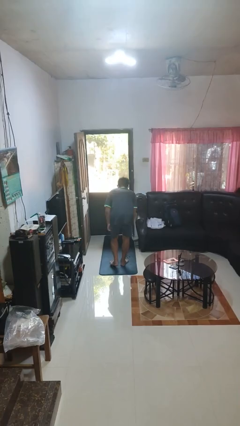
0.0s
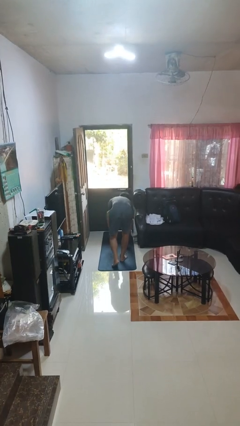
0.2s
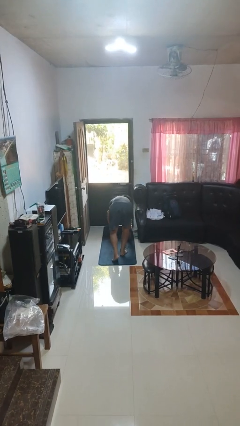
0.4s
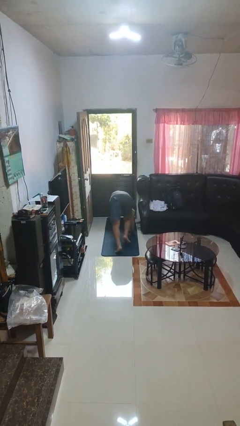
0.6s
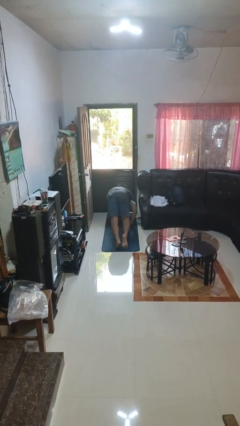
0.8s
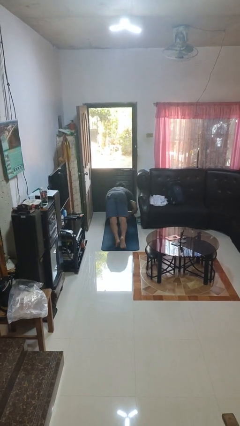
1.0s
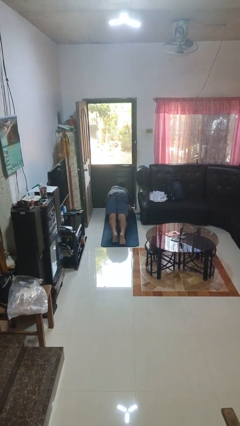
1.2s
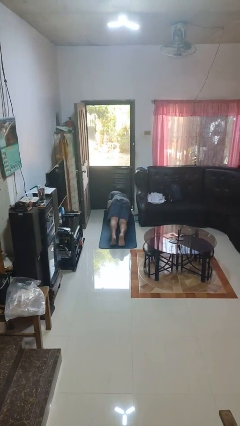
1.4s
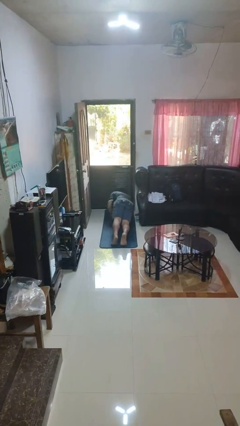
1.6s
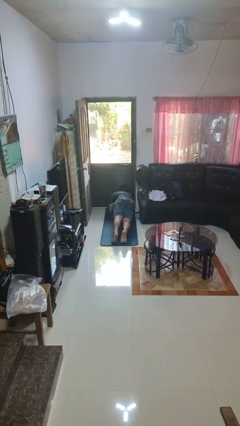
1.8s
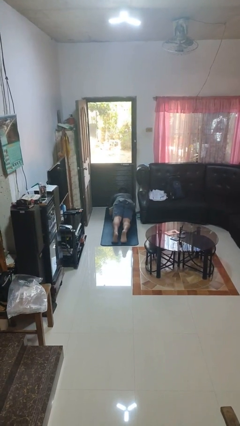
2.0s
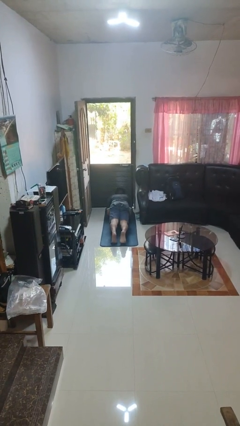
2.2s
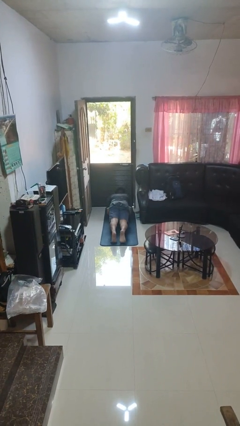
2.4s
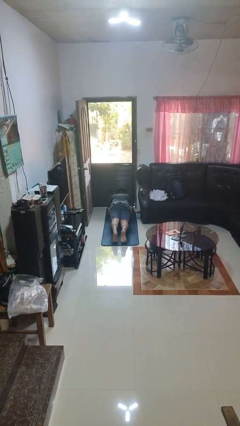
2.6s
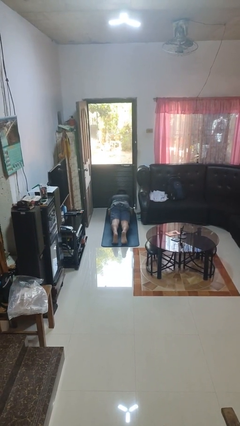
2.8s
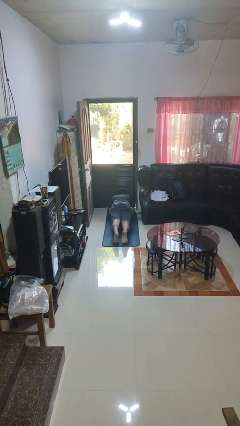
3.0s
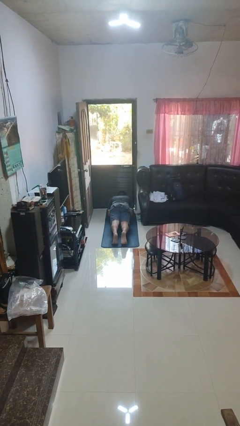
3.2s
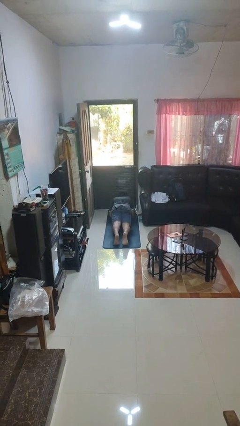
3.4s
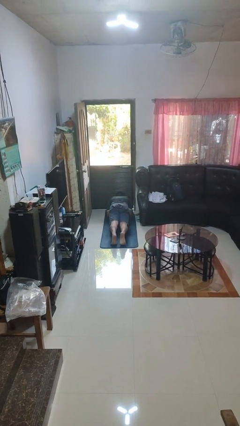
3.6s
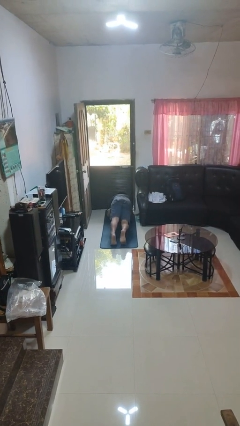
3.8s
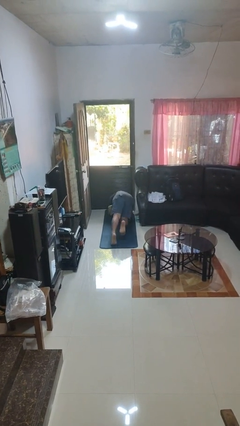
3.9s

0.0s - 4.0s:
person exercises with plank

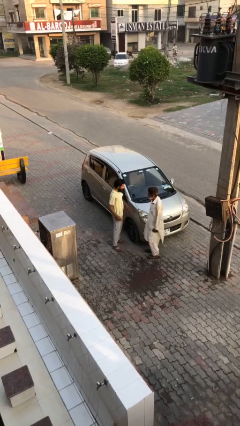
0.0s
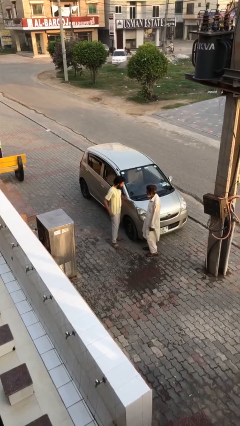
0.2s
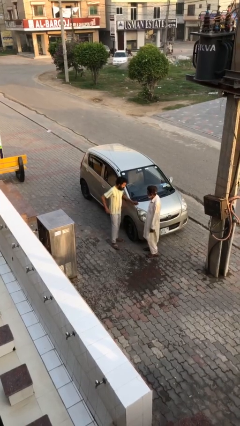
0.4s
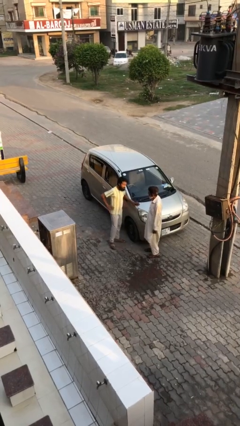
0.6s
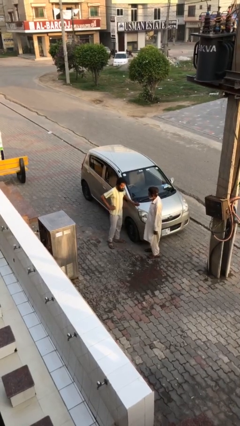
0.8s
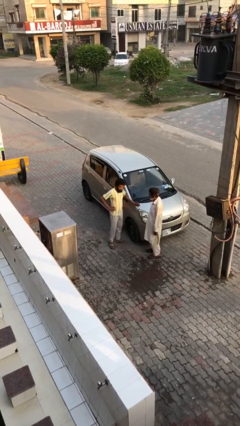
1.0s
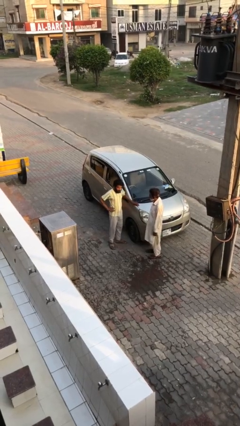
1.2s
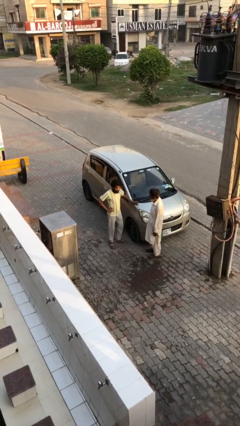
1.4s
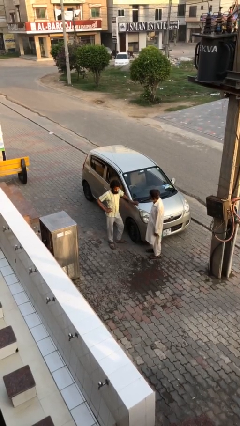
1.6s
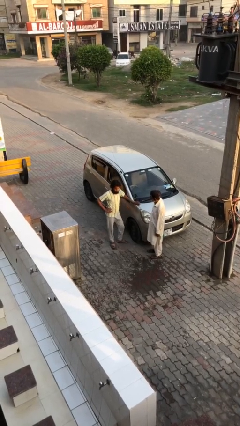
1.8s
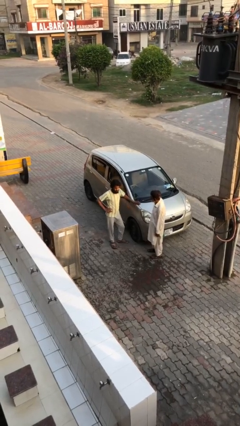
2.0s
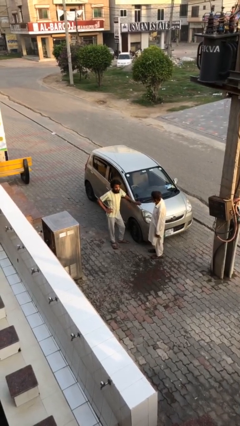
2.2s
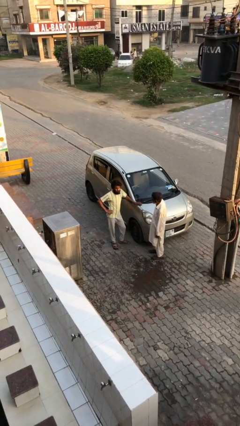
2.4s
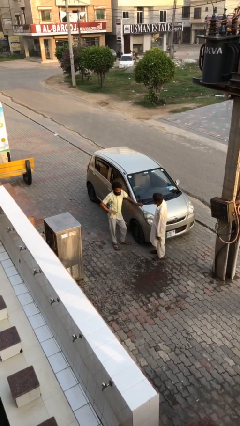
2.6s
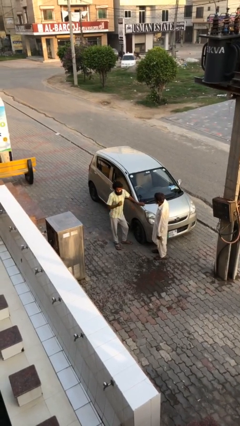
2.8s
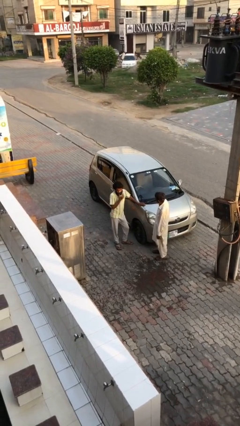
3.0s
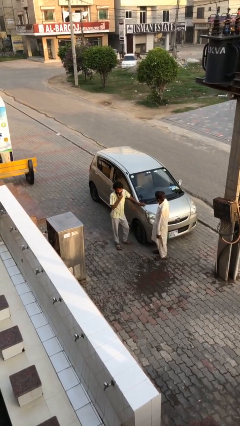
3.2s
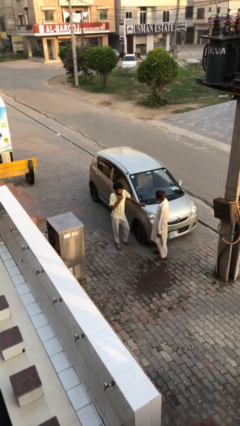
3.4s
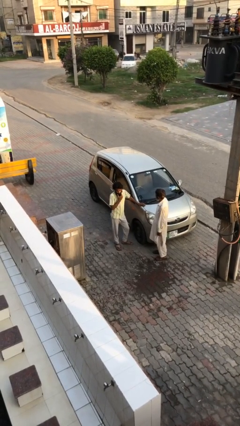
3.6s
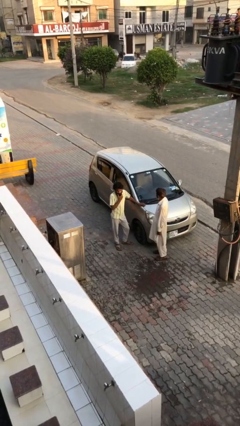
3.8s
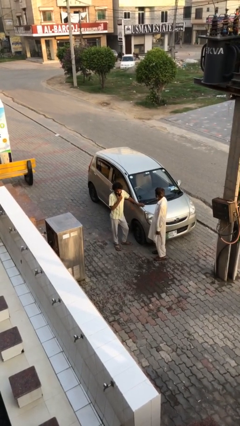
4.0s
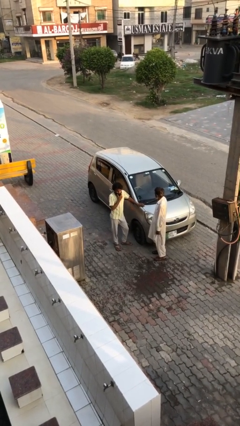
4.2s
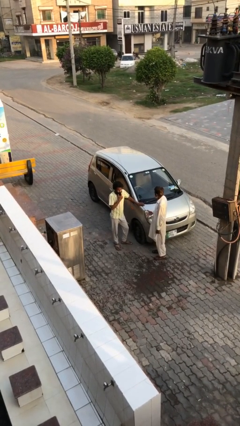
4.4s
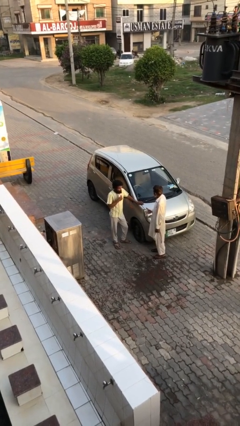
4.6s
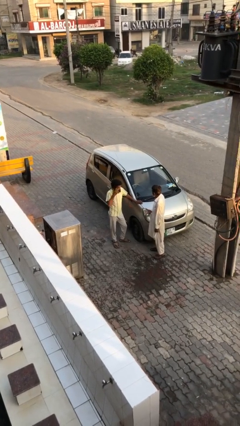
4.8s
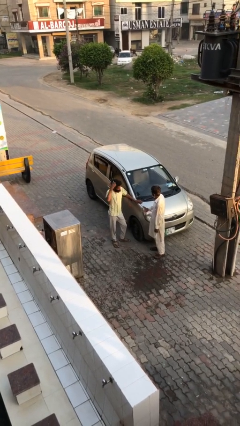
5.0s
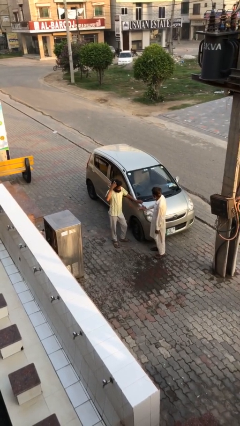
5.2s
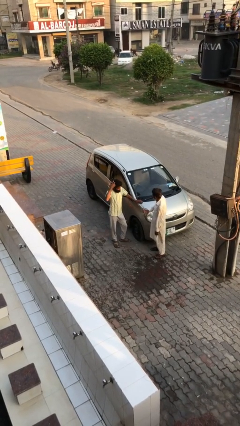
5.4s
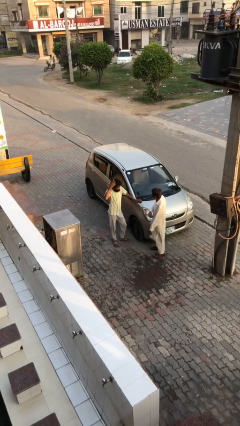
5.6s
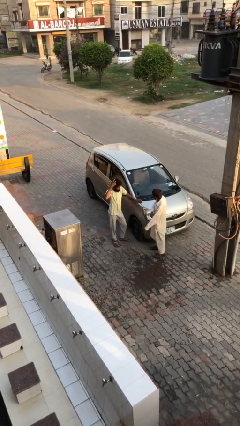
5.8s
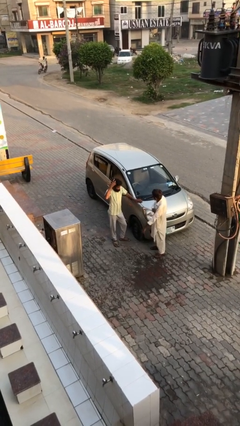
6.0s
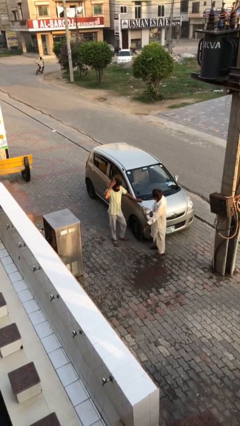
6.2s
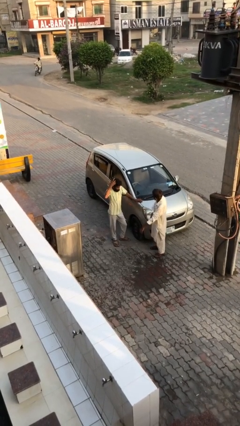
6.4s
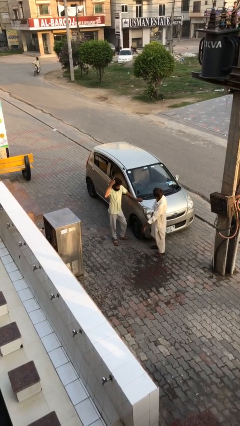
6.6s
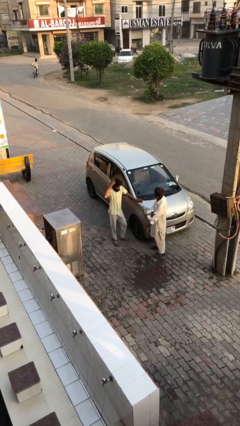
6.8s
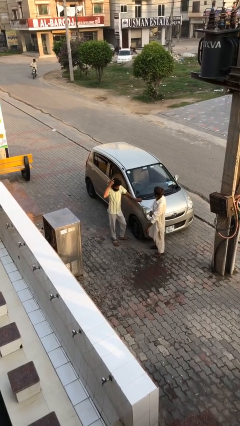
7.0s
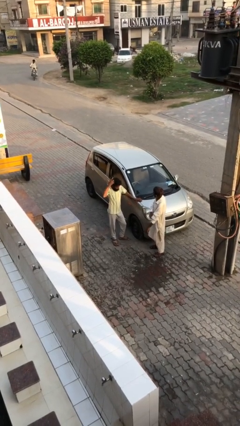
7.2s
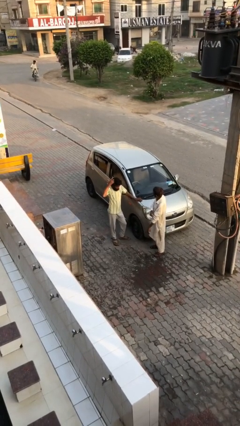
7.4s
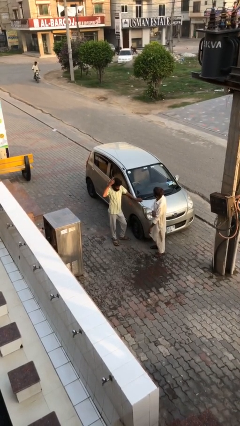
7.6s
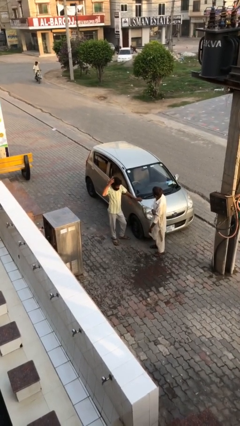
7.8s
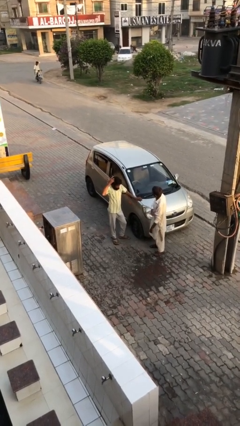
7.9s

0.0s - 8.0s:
person talks to person

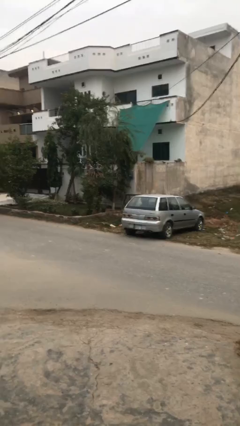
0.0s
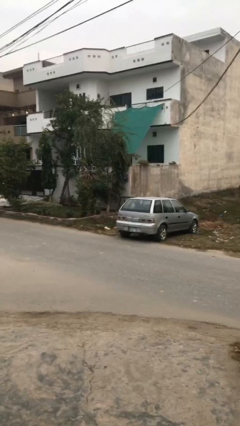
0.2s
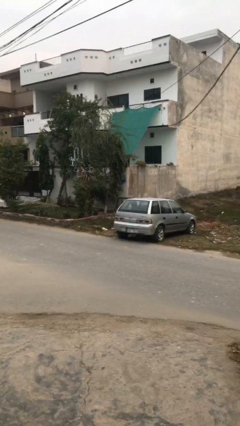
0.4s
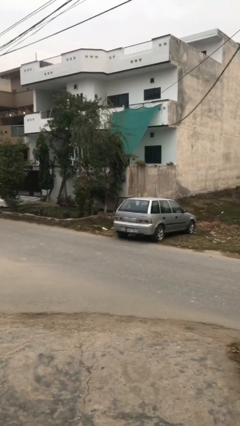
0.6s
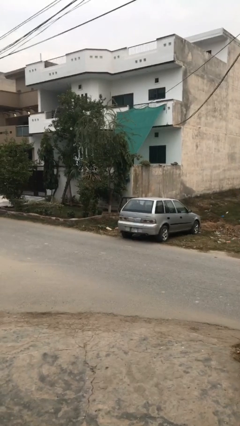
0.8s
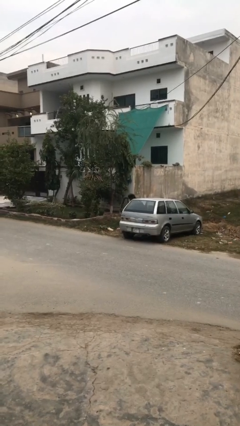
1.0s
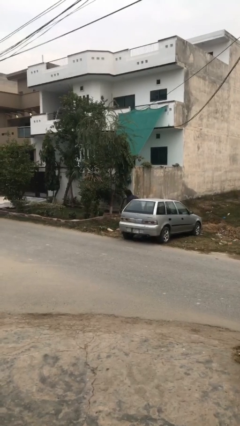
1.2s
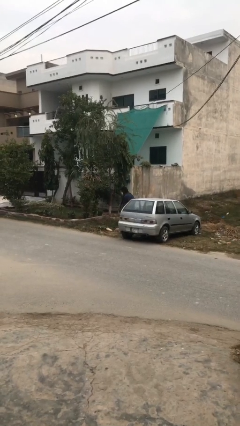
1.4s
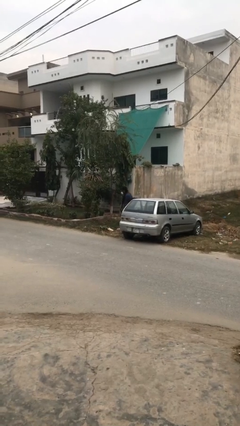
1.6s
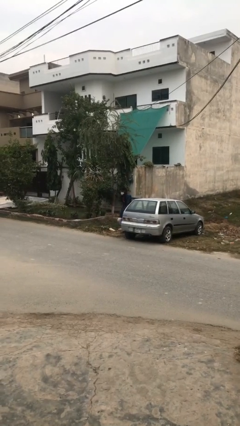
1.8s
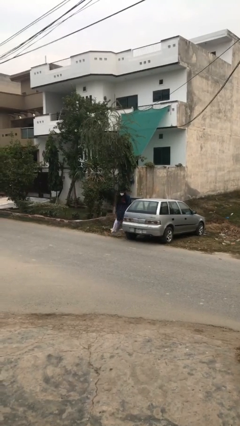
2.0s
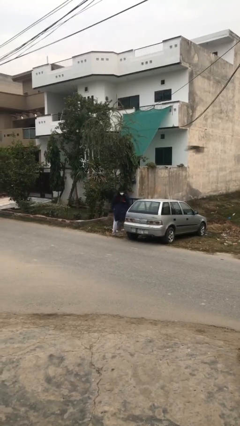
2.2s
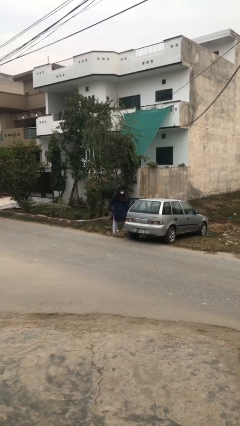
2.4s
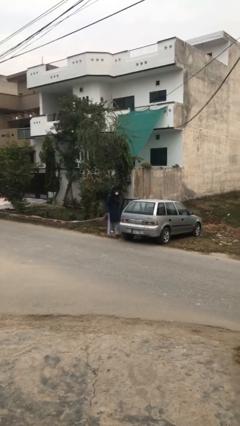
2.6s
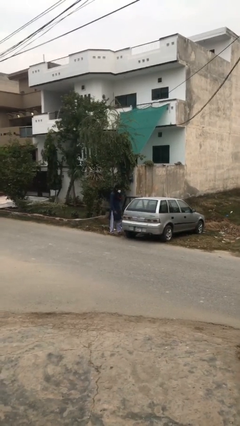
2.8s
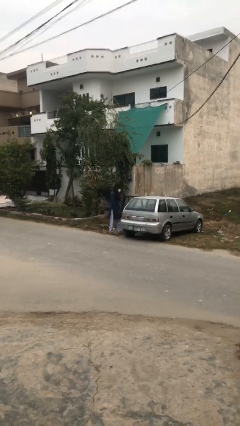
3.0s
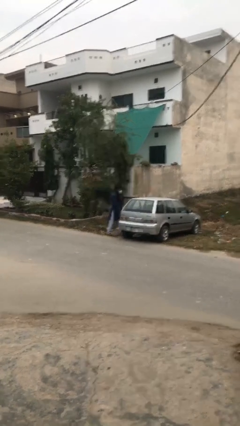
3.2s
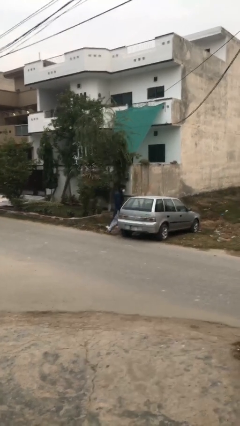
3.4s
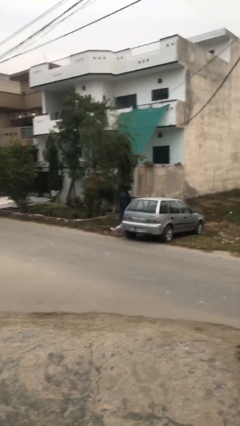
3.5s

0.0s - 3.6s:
person exits car

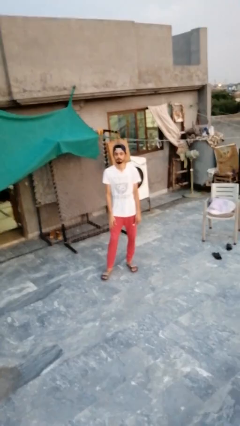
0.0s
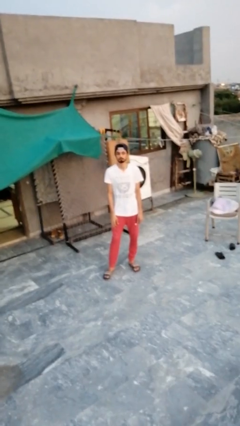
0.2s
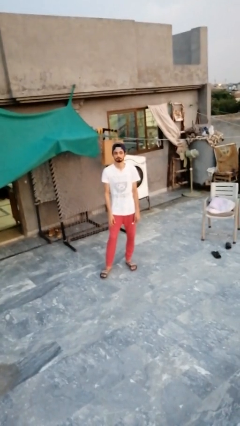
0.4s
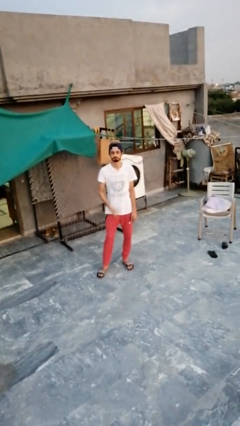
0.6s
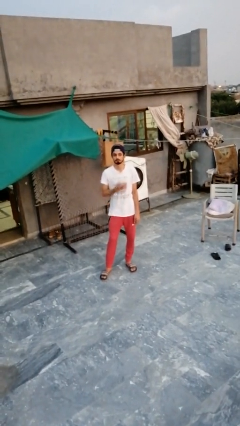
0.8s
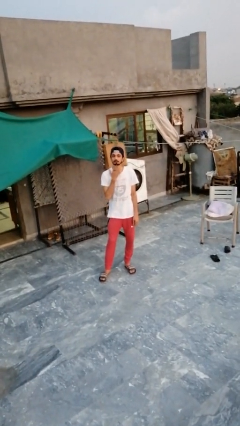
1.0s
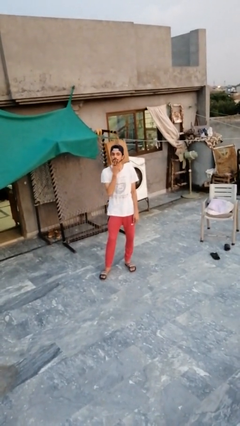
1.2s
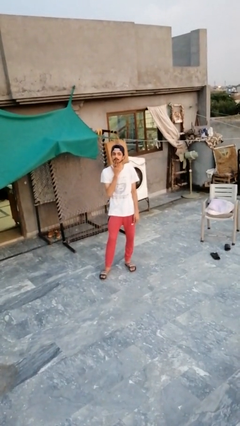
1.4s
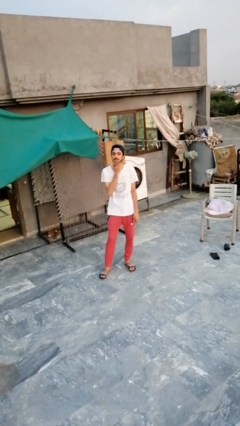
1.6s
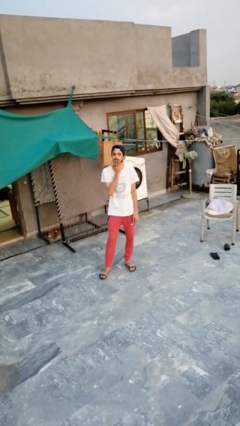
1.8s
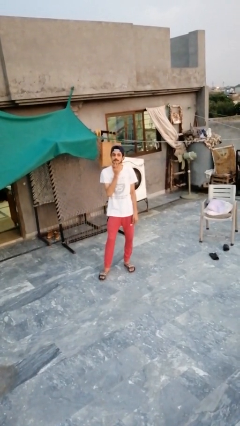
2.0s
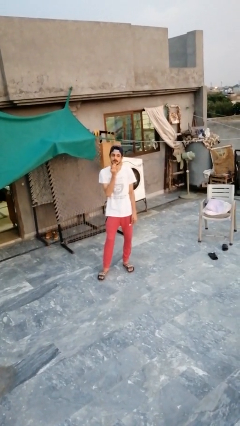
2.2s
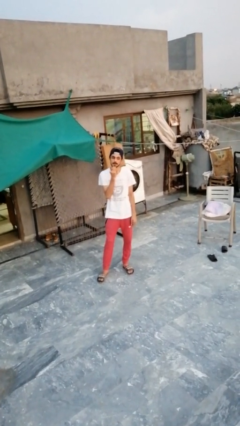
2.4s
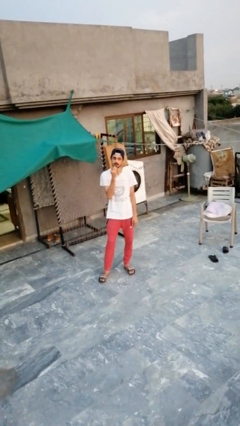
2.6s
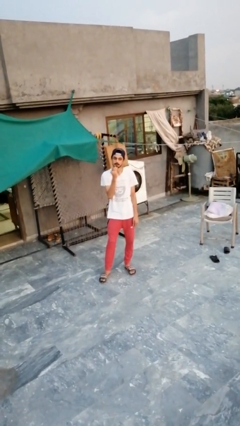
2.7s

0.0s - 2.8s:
person strokes chin
